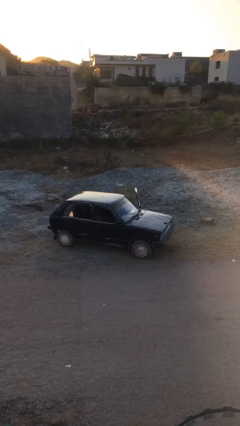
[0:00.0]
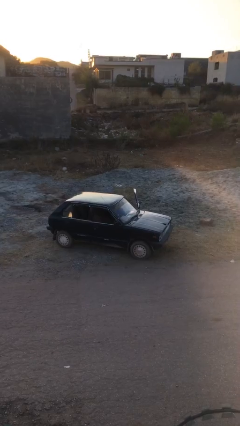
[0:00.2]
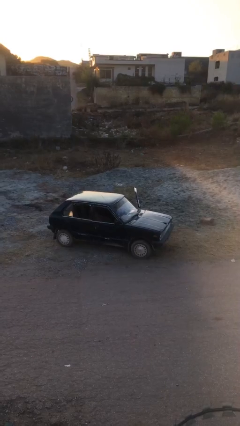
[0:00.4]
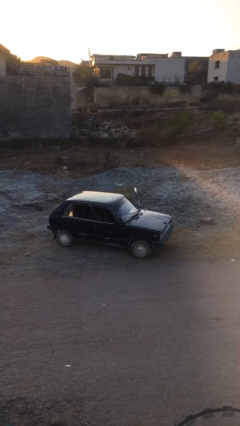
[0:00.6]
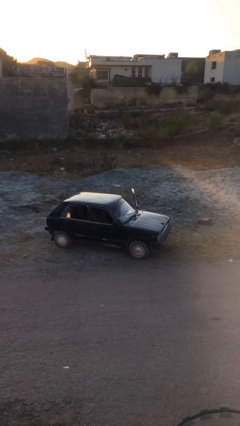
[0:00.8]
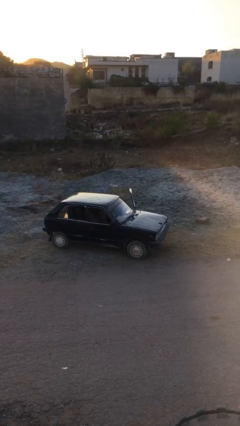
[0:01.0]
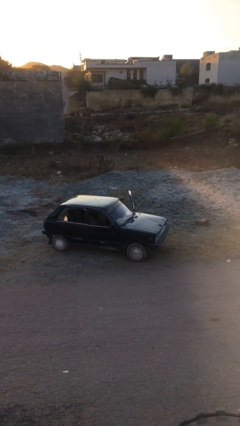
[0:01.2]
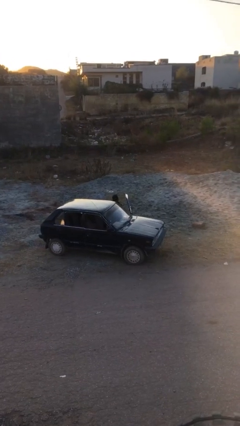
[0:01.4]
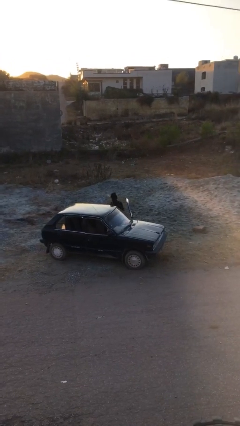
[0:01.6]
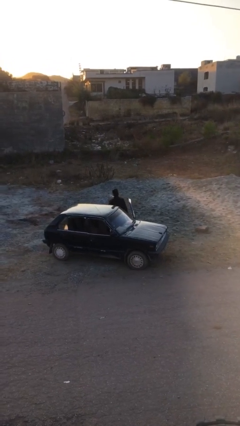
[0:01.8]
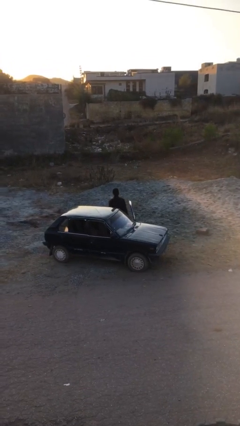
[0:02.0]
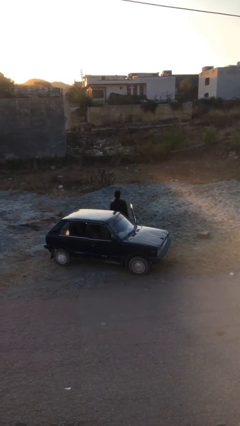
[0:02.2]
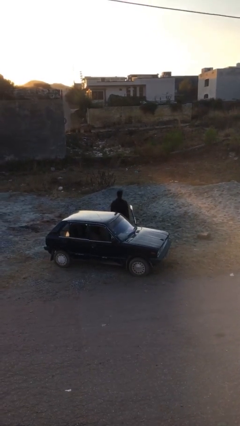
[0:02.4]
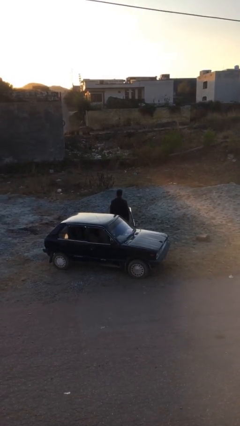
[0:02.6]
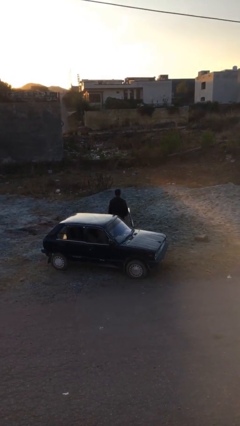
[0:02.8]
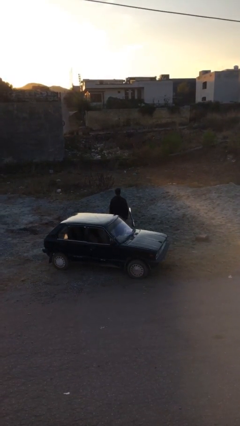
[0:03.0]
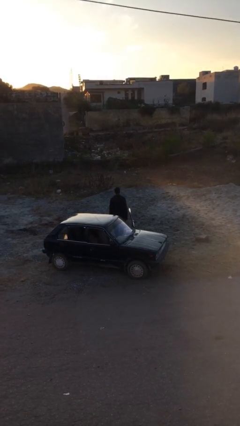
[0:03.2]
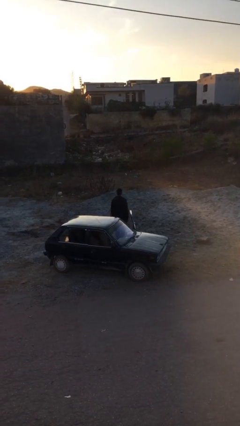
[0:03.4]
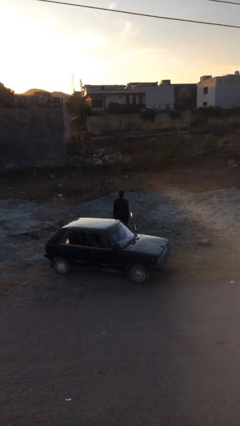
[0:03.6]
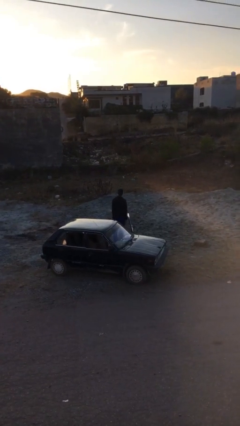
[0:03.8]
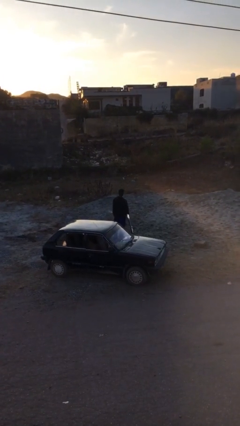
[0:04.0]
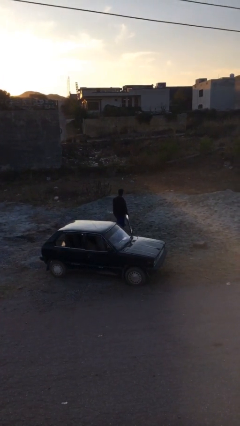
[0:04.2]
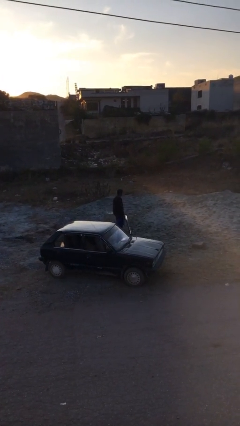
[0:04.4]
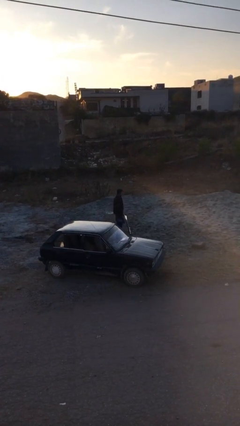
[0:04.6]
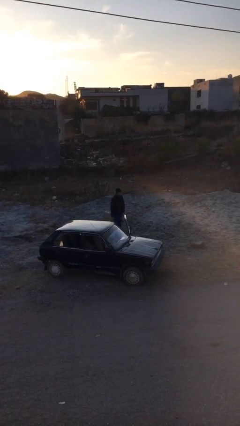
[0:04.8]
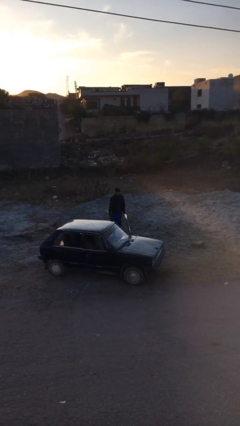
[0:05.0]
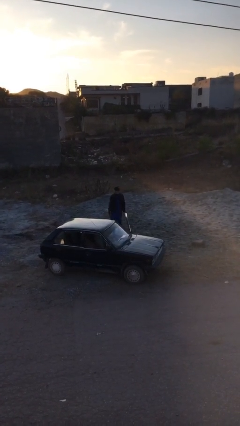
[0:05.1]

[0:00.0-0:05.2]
person exits car

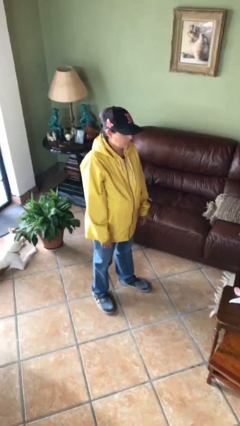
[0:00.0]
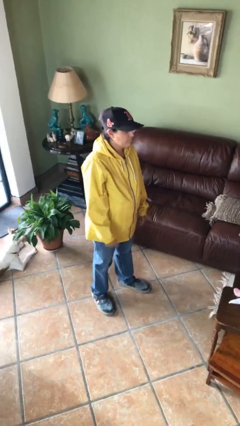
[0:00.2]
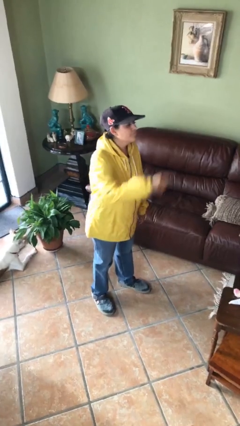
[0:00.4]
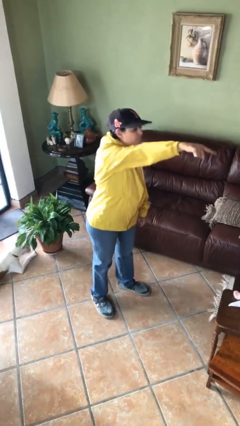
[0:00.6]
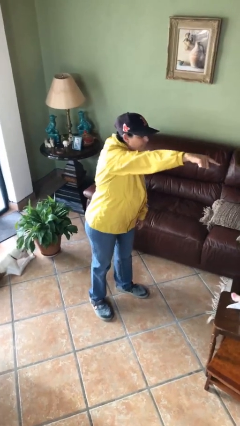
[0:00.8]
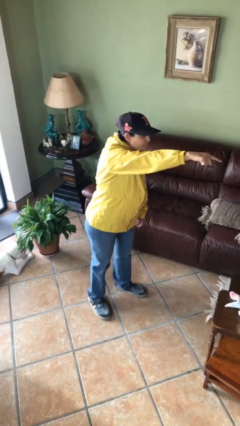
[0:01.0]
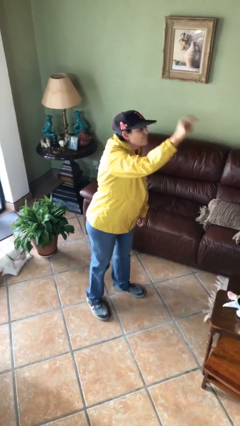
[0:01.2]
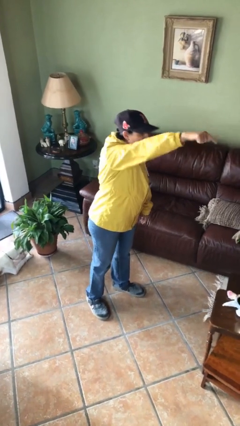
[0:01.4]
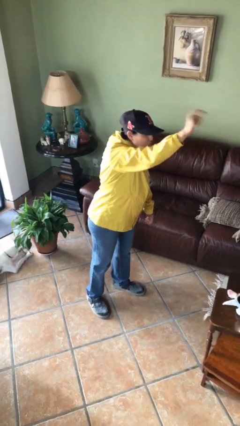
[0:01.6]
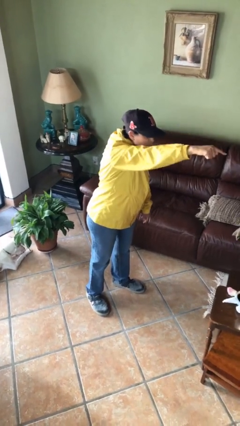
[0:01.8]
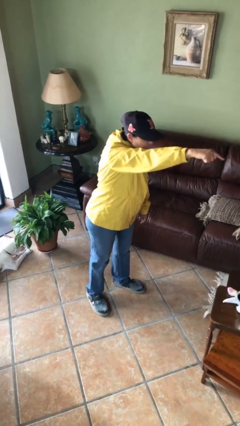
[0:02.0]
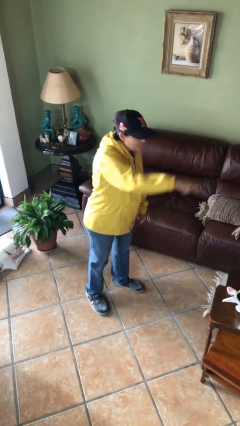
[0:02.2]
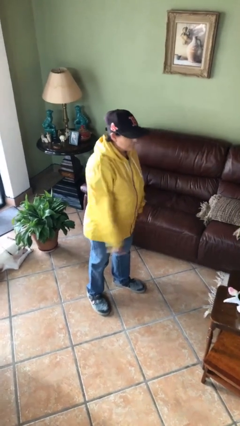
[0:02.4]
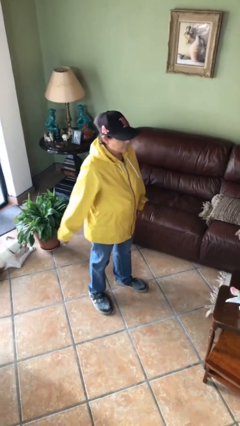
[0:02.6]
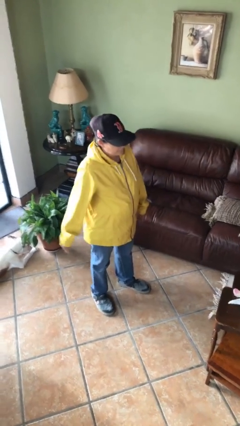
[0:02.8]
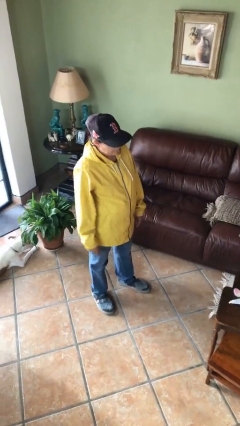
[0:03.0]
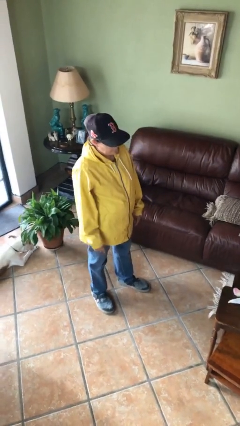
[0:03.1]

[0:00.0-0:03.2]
person points at person

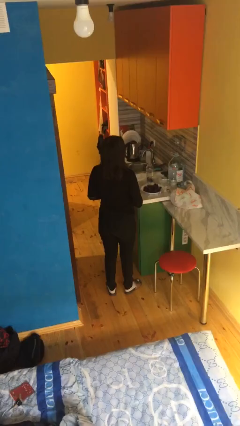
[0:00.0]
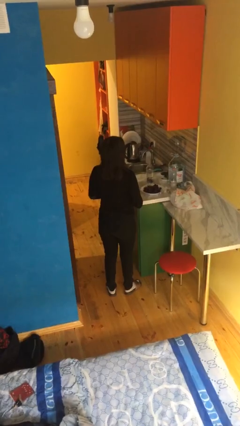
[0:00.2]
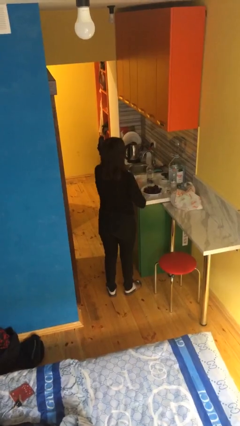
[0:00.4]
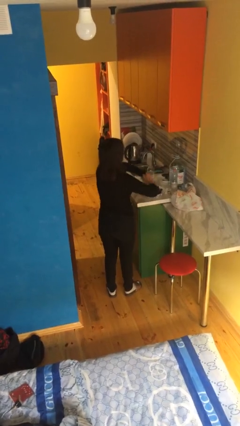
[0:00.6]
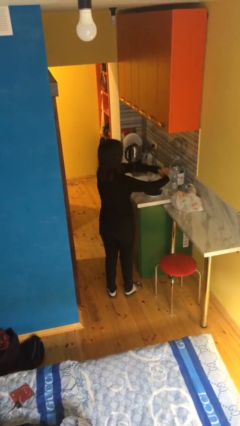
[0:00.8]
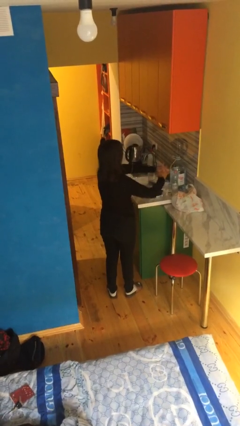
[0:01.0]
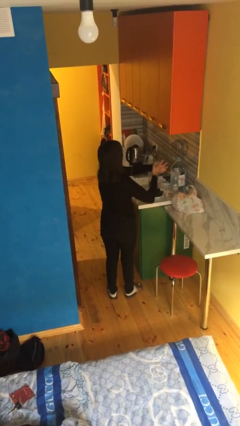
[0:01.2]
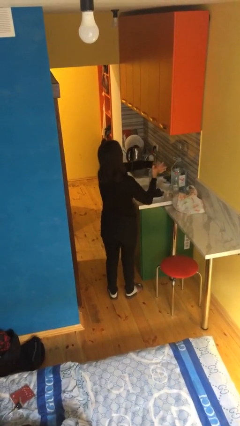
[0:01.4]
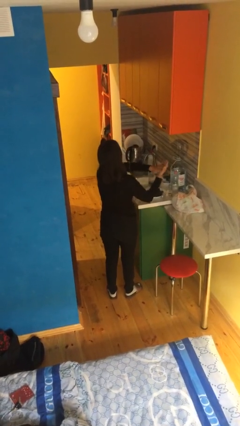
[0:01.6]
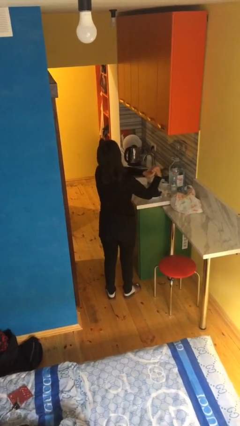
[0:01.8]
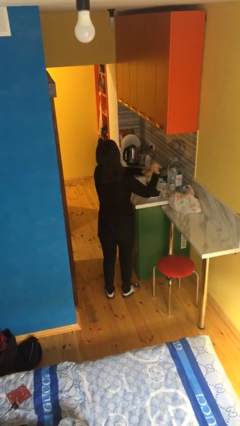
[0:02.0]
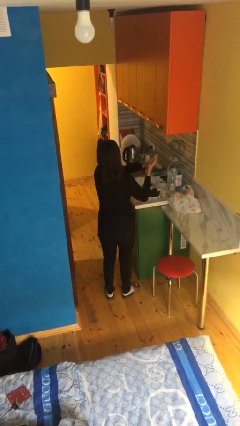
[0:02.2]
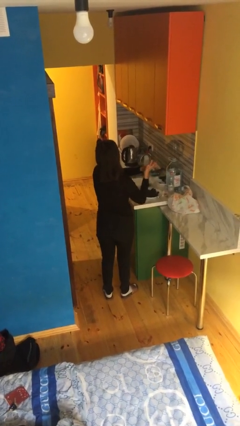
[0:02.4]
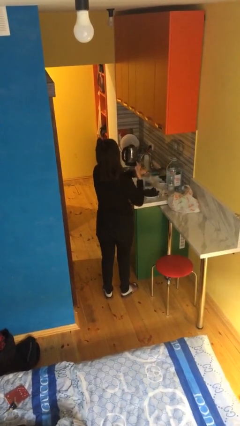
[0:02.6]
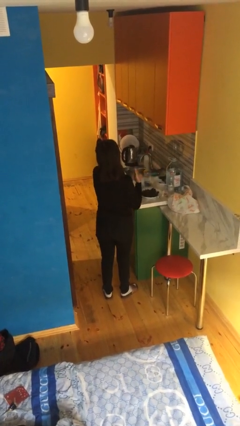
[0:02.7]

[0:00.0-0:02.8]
person cracks knuckles

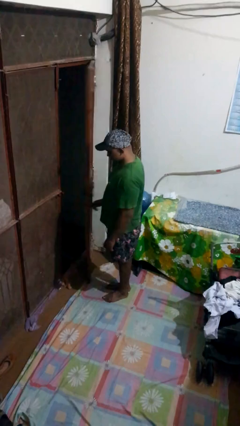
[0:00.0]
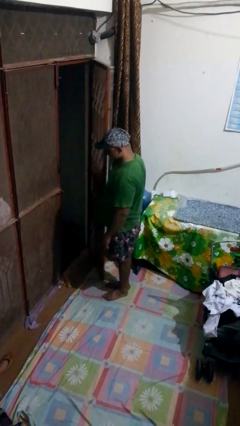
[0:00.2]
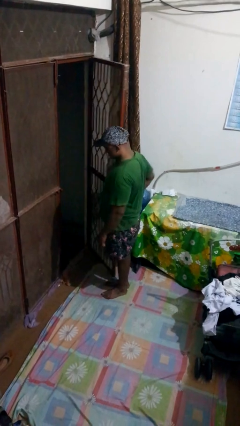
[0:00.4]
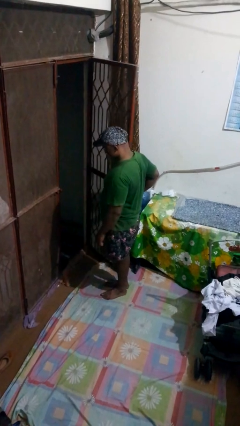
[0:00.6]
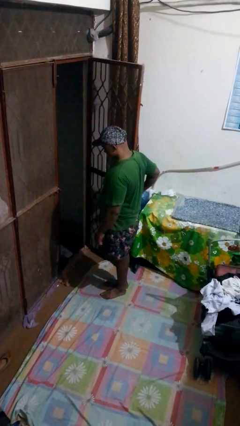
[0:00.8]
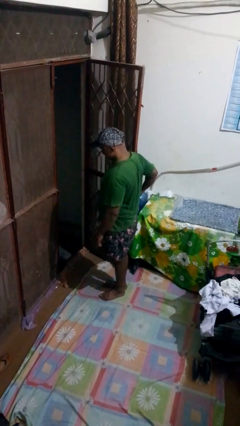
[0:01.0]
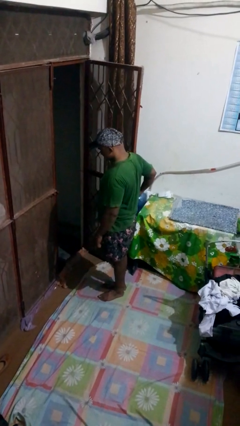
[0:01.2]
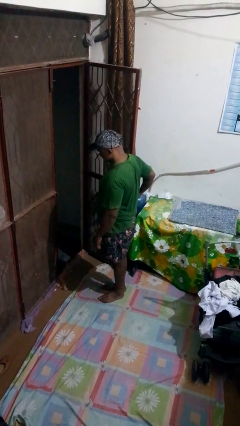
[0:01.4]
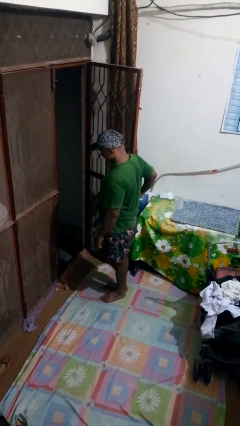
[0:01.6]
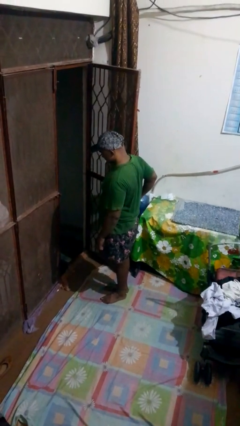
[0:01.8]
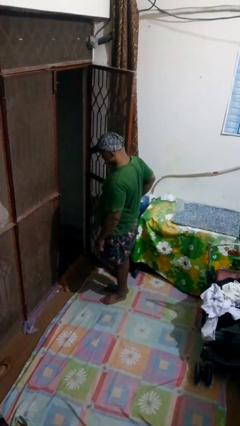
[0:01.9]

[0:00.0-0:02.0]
person opens gate

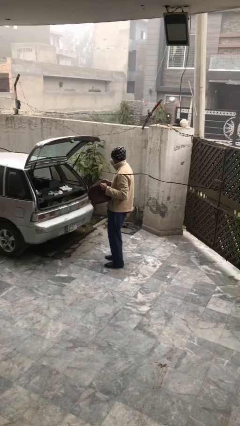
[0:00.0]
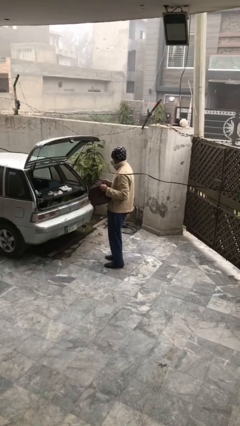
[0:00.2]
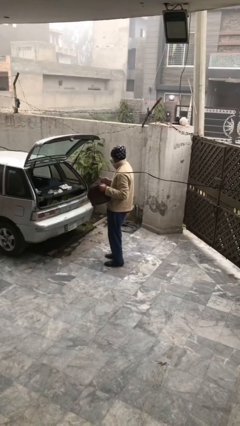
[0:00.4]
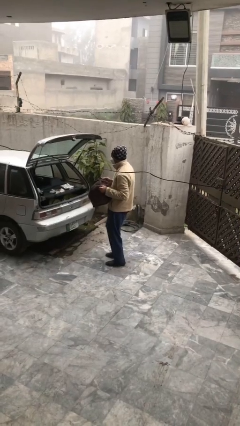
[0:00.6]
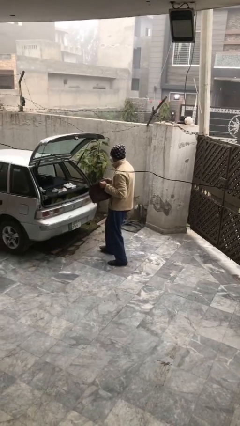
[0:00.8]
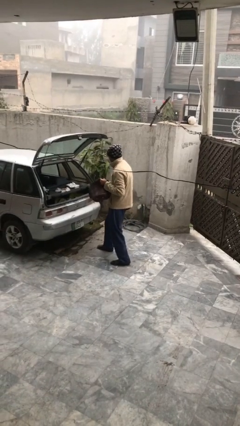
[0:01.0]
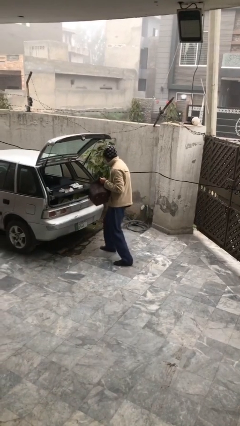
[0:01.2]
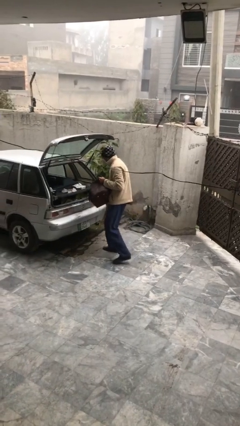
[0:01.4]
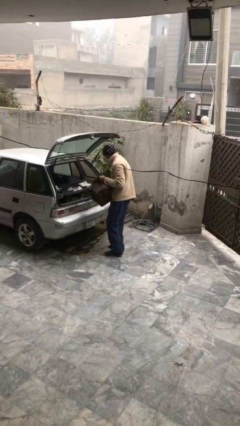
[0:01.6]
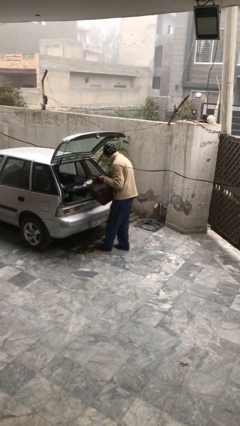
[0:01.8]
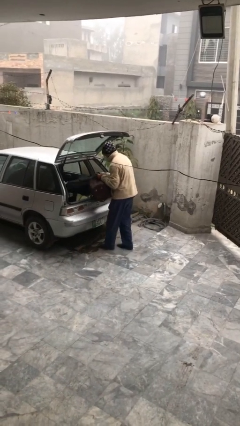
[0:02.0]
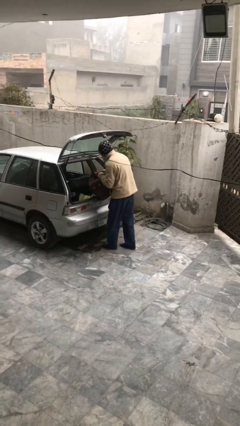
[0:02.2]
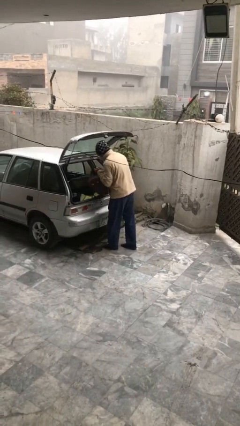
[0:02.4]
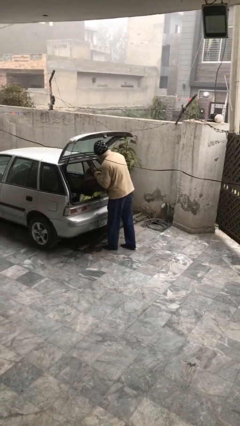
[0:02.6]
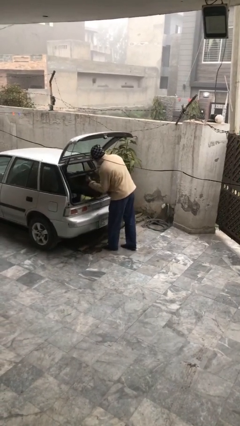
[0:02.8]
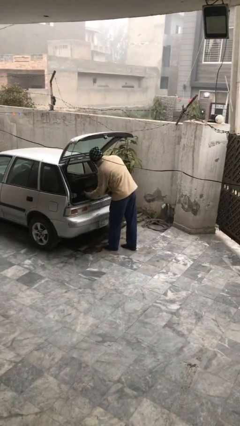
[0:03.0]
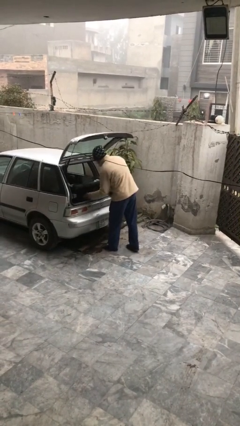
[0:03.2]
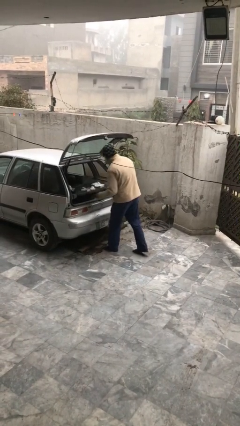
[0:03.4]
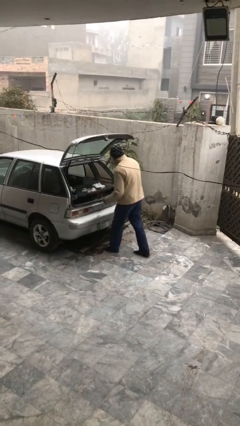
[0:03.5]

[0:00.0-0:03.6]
person loads car

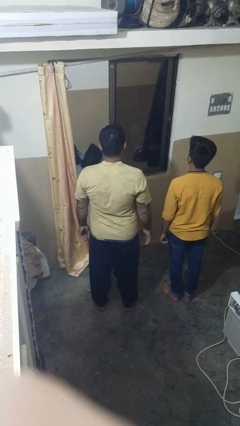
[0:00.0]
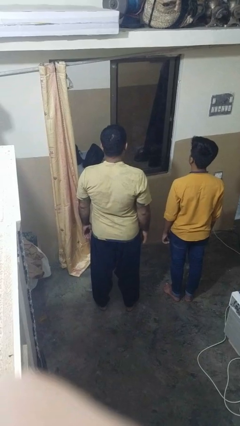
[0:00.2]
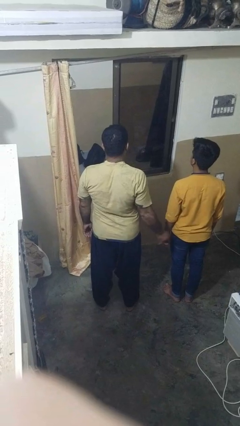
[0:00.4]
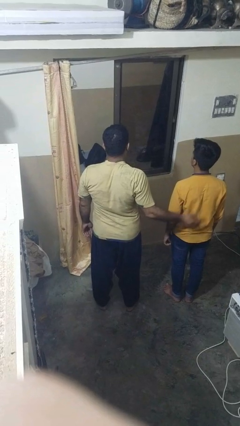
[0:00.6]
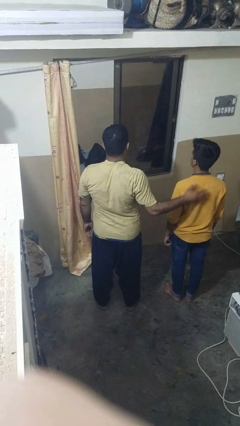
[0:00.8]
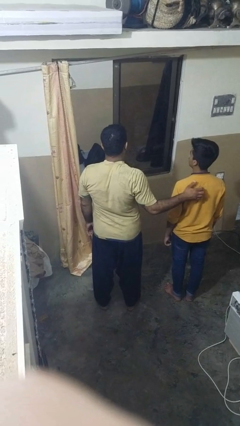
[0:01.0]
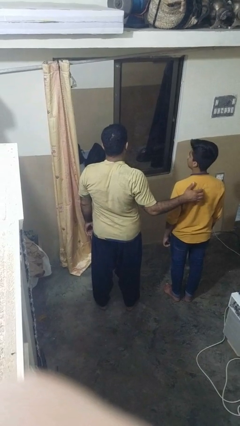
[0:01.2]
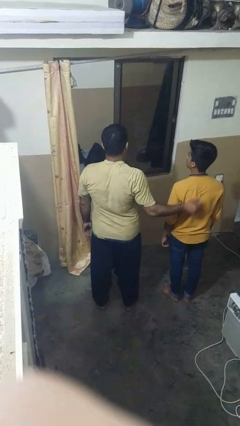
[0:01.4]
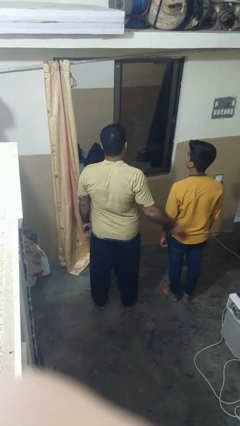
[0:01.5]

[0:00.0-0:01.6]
person touches back of person
